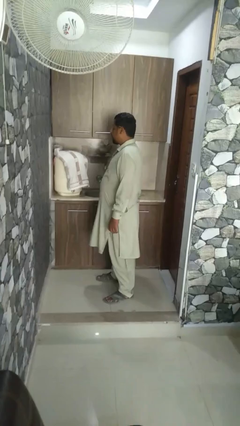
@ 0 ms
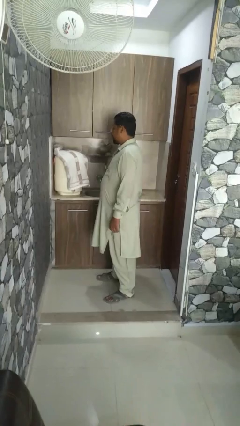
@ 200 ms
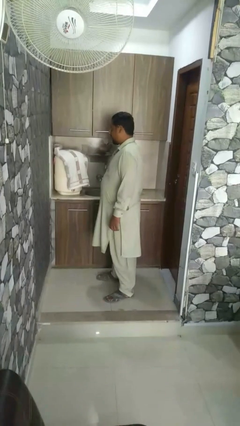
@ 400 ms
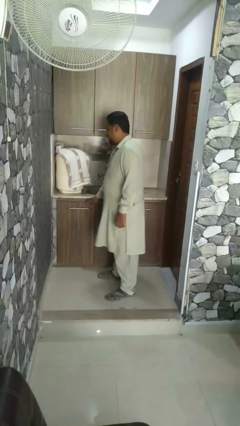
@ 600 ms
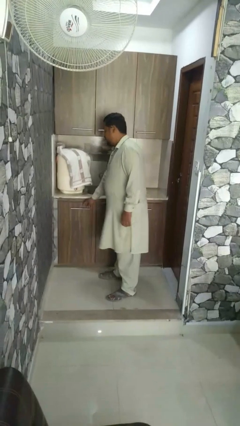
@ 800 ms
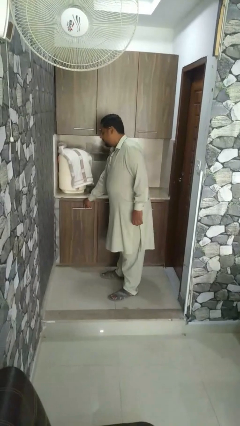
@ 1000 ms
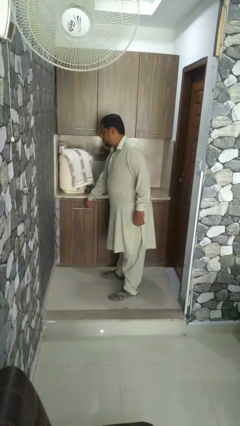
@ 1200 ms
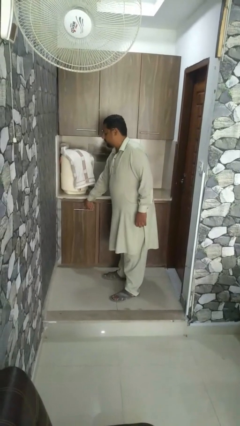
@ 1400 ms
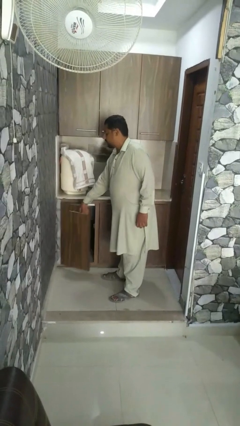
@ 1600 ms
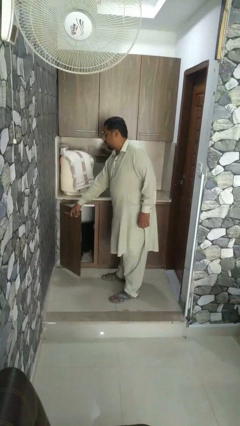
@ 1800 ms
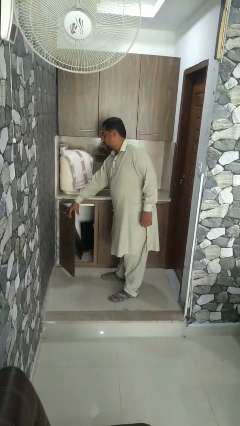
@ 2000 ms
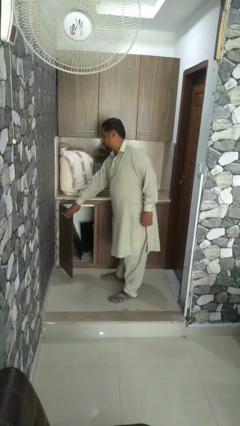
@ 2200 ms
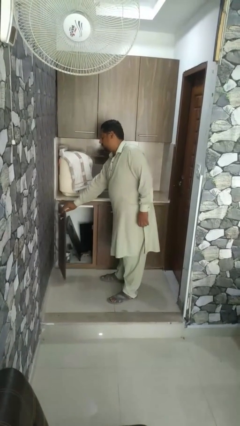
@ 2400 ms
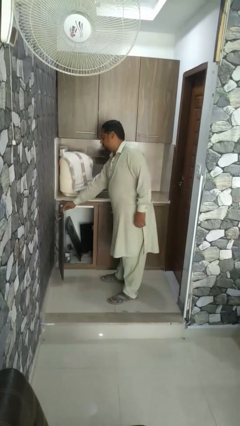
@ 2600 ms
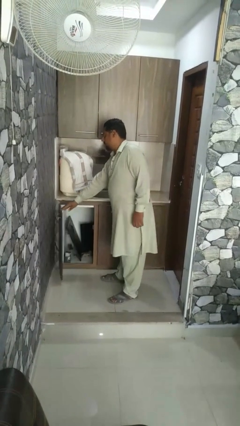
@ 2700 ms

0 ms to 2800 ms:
person opens refrigerator

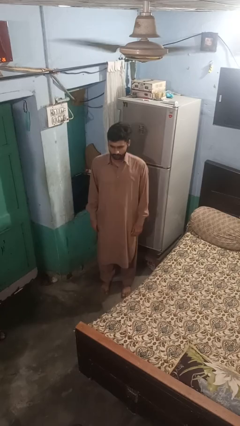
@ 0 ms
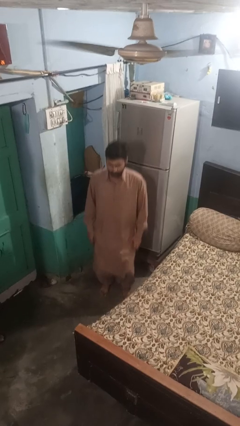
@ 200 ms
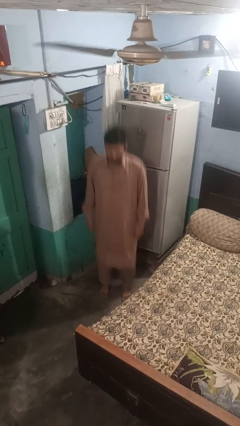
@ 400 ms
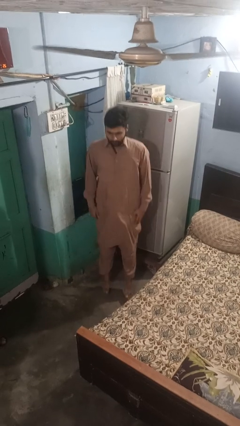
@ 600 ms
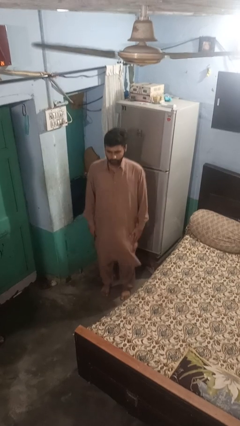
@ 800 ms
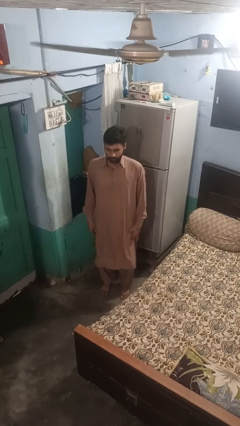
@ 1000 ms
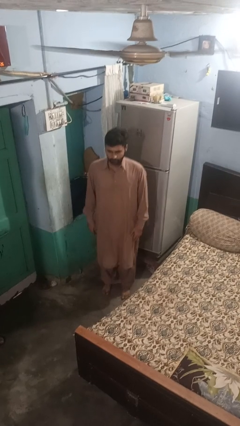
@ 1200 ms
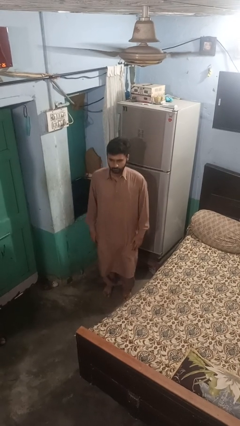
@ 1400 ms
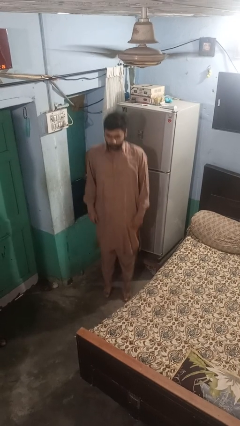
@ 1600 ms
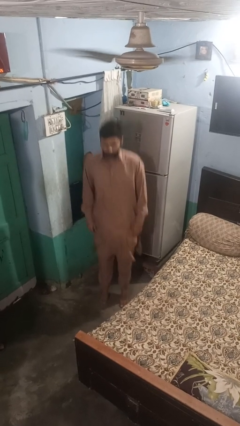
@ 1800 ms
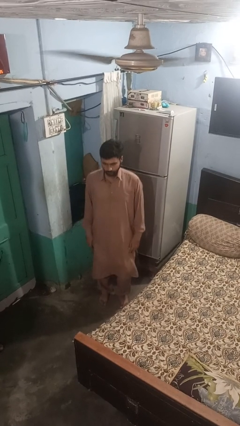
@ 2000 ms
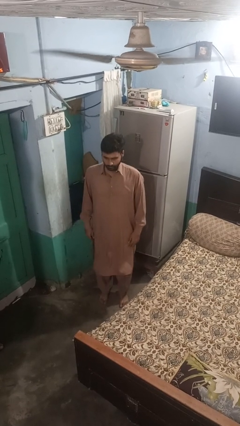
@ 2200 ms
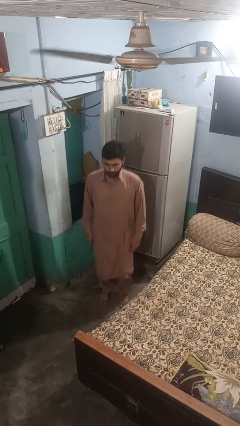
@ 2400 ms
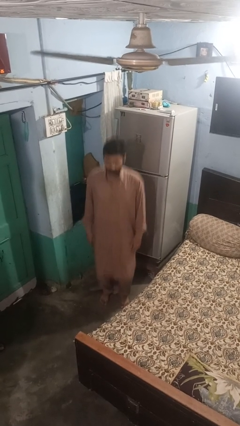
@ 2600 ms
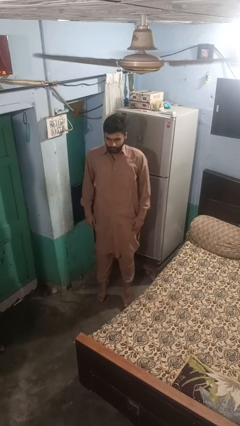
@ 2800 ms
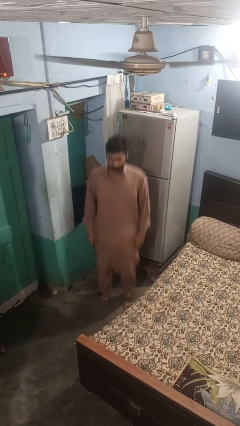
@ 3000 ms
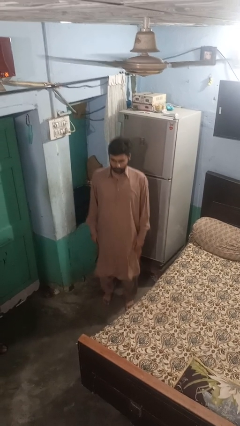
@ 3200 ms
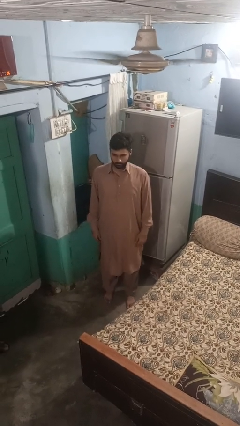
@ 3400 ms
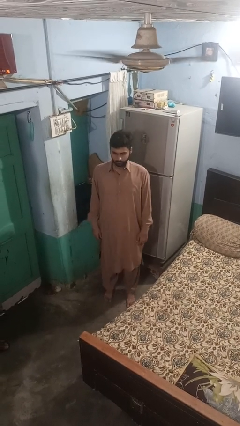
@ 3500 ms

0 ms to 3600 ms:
person jumps

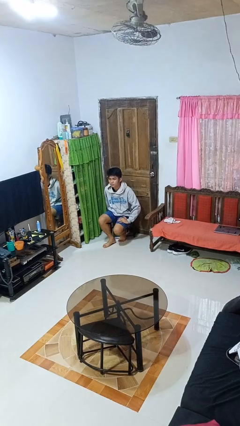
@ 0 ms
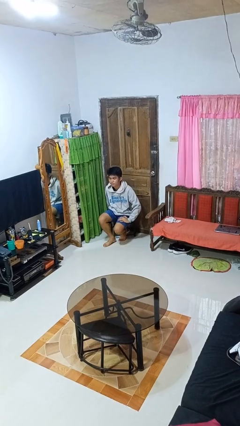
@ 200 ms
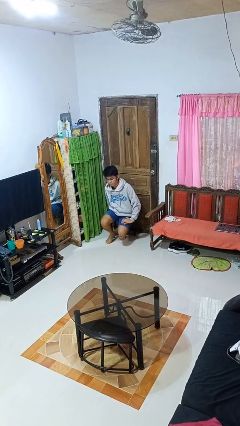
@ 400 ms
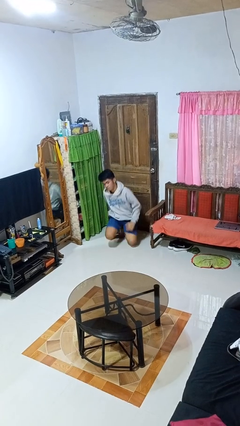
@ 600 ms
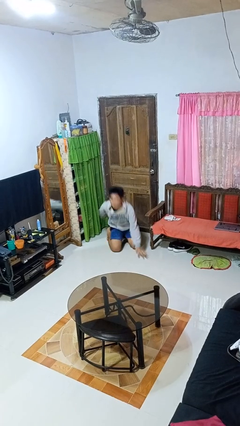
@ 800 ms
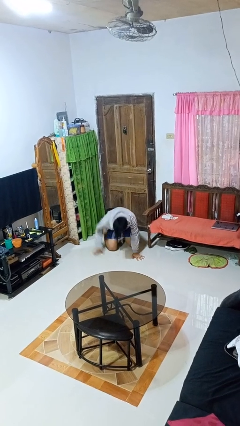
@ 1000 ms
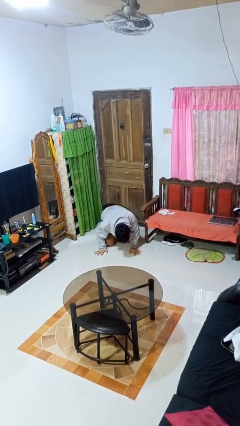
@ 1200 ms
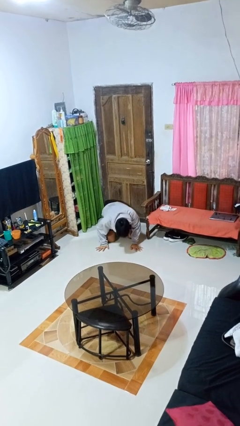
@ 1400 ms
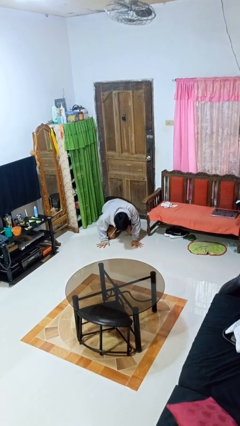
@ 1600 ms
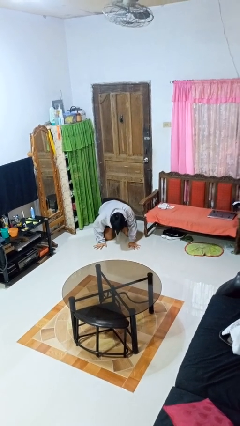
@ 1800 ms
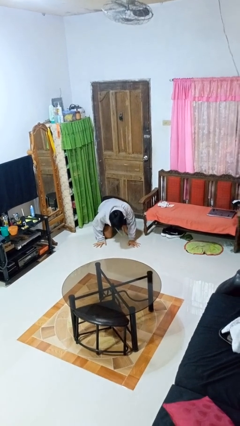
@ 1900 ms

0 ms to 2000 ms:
person falls from chair

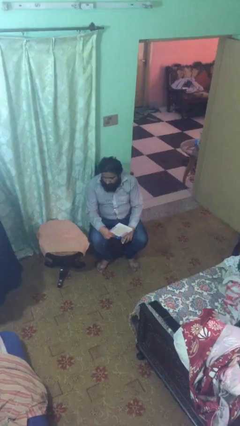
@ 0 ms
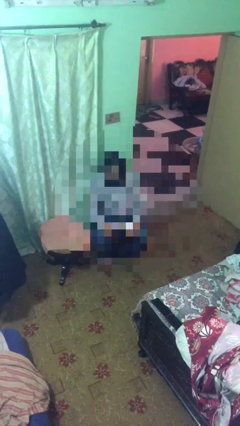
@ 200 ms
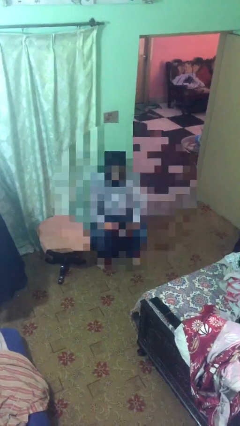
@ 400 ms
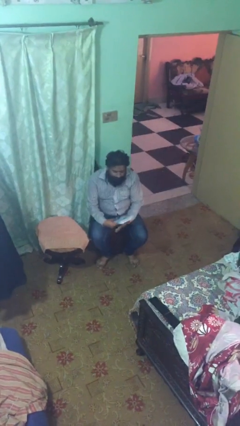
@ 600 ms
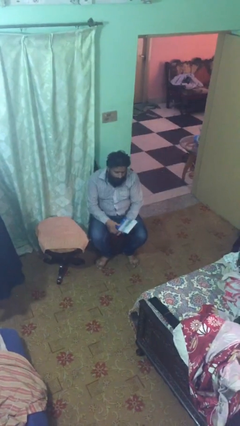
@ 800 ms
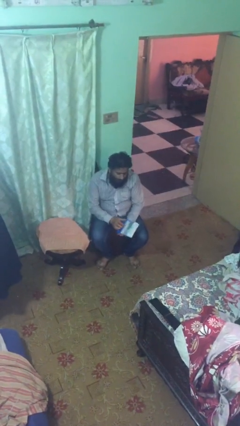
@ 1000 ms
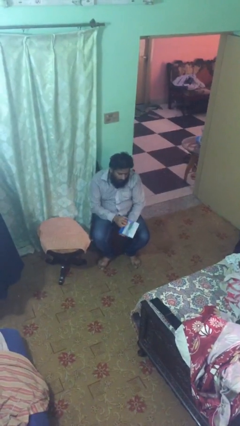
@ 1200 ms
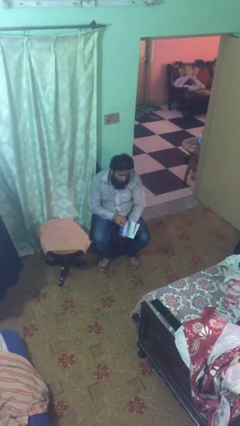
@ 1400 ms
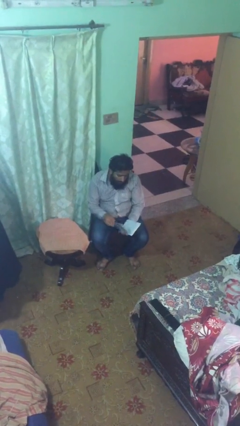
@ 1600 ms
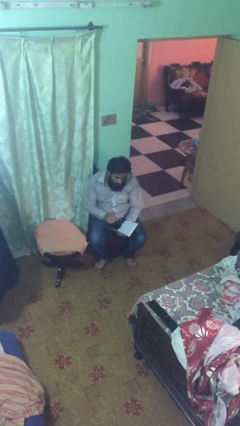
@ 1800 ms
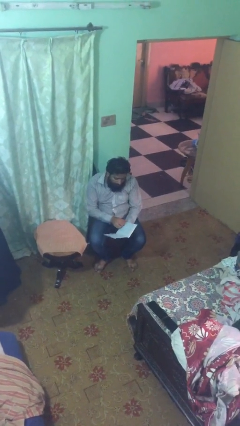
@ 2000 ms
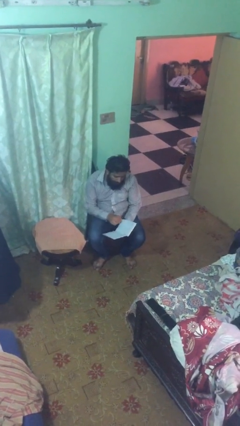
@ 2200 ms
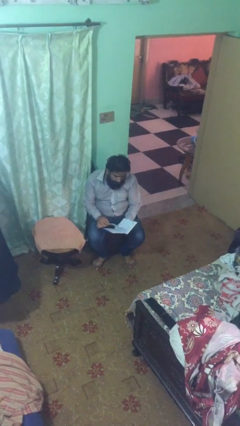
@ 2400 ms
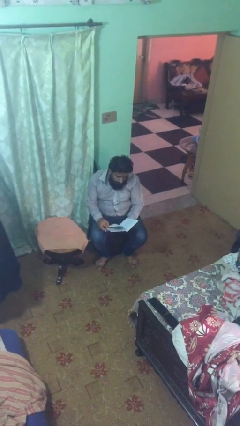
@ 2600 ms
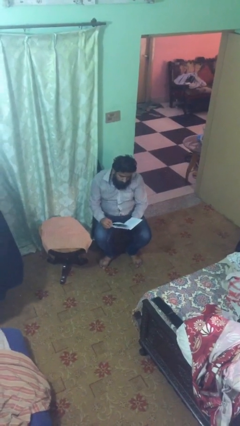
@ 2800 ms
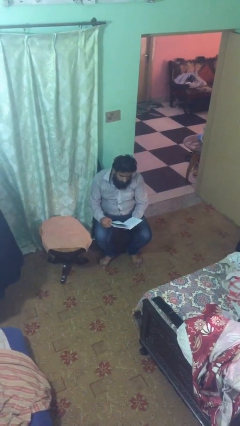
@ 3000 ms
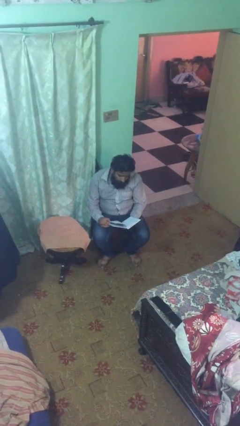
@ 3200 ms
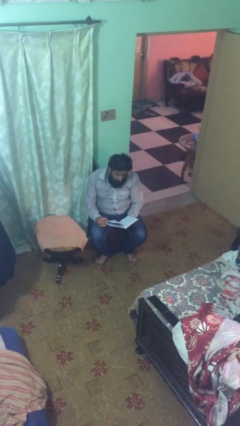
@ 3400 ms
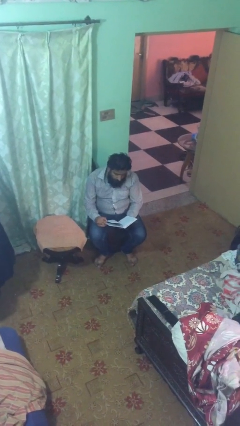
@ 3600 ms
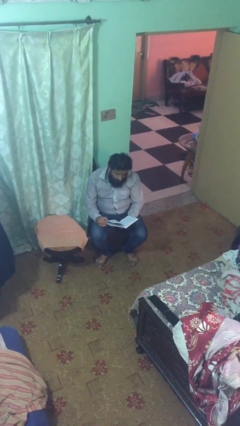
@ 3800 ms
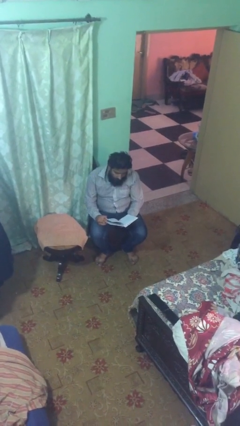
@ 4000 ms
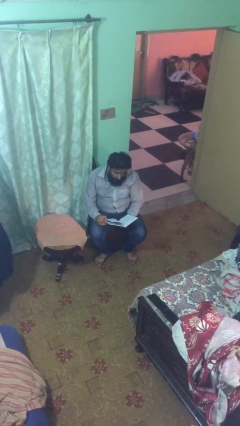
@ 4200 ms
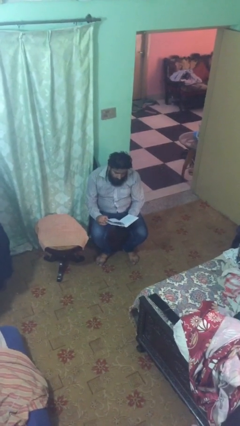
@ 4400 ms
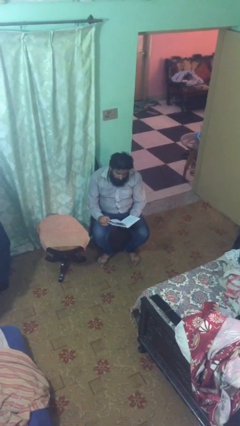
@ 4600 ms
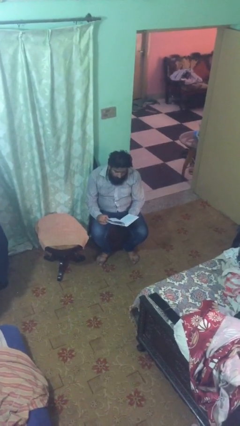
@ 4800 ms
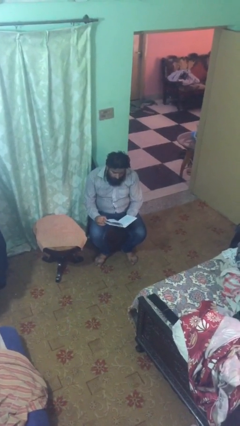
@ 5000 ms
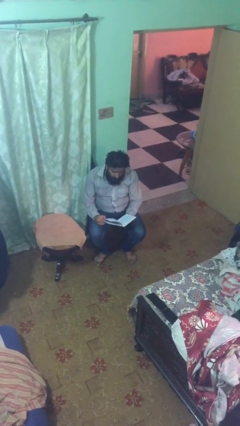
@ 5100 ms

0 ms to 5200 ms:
person reads document

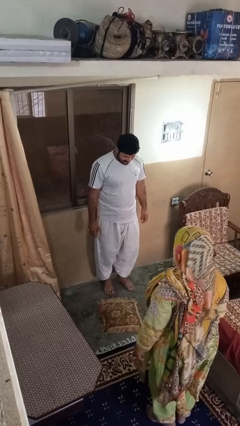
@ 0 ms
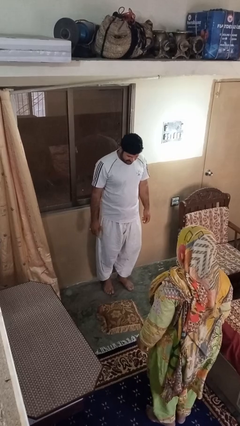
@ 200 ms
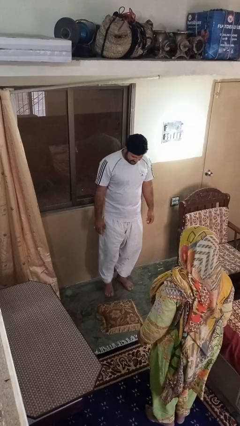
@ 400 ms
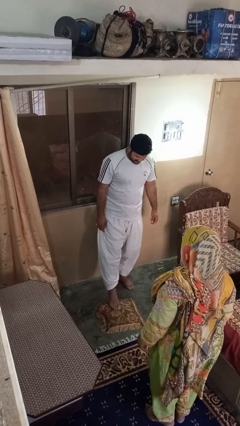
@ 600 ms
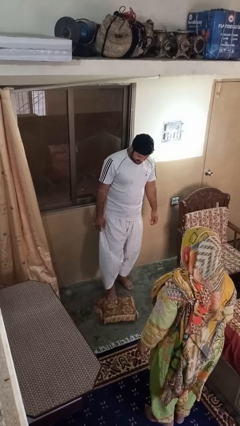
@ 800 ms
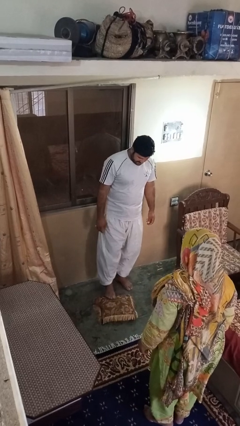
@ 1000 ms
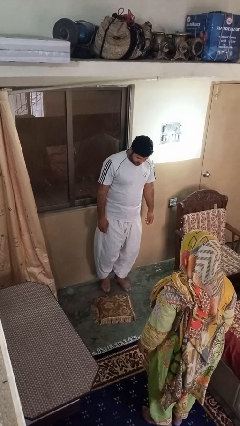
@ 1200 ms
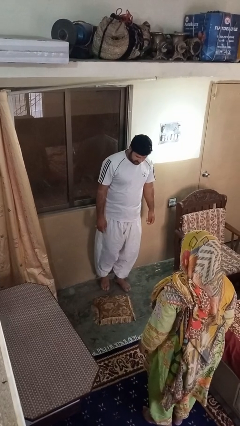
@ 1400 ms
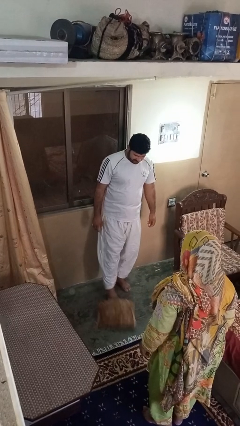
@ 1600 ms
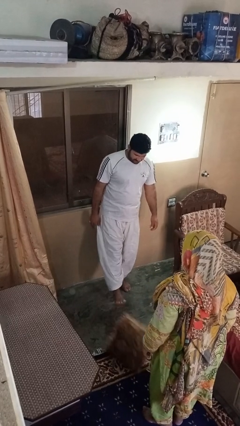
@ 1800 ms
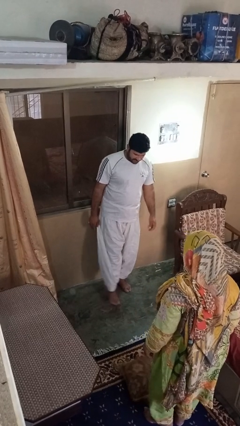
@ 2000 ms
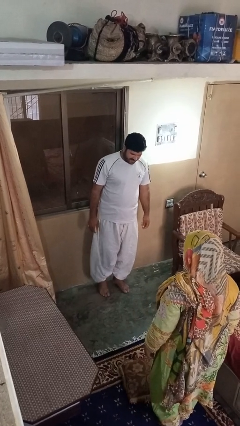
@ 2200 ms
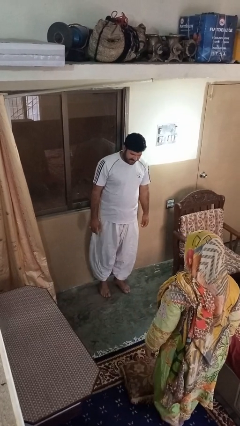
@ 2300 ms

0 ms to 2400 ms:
person kicks object to person

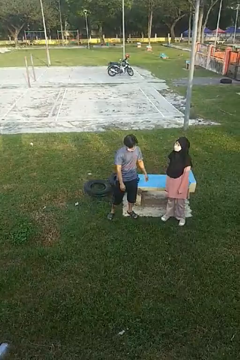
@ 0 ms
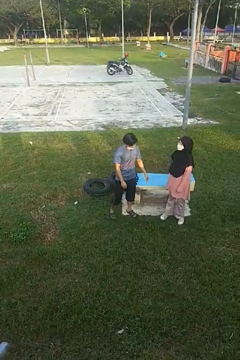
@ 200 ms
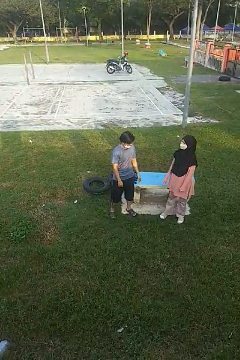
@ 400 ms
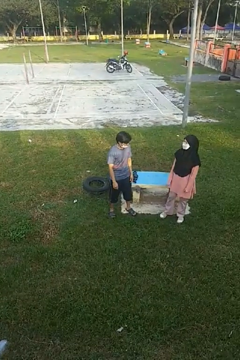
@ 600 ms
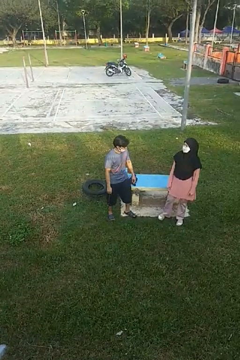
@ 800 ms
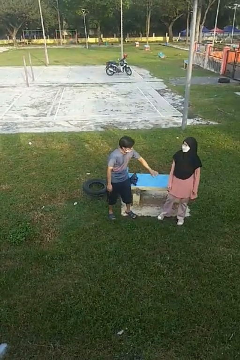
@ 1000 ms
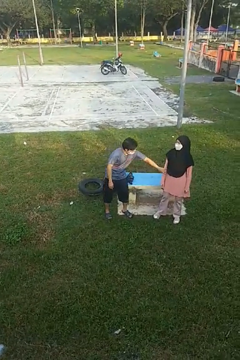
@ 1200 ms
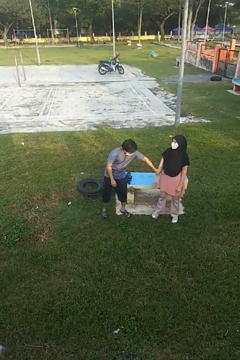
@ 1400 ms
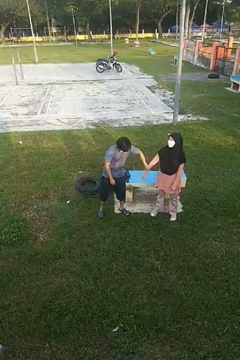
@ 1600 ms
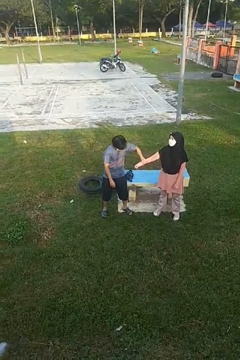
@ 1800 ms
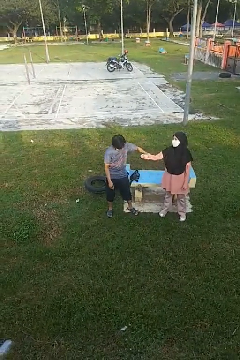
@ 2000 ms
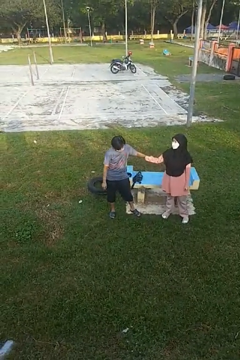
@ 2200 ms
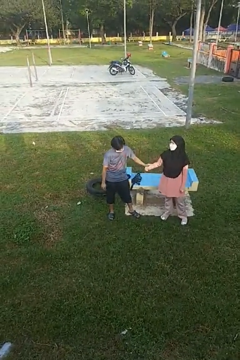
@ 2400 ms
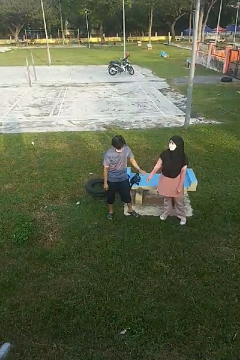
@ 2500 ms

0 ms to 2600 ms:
person grabs person by forearm
